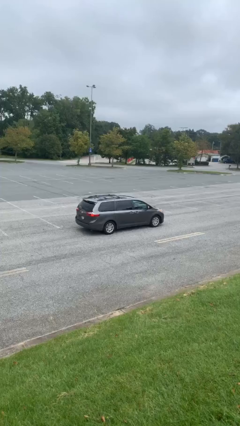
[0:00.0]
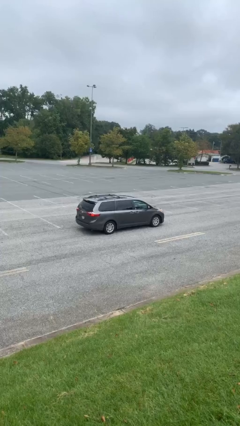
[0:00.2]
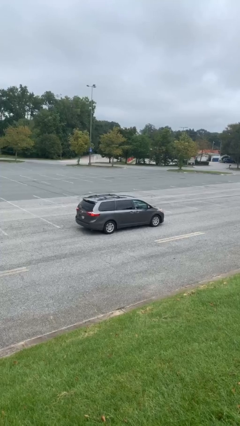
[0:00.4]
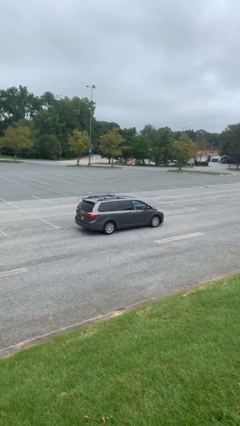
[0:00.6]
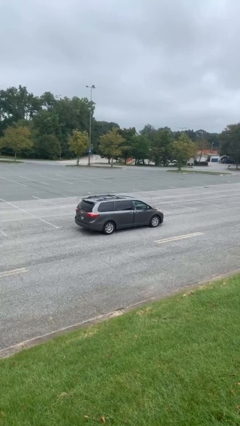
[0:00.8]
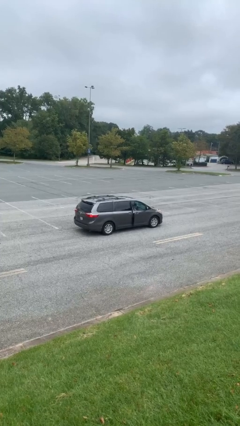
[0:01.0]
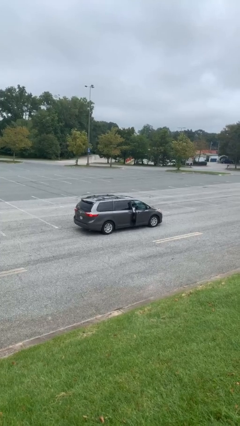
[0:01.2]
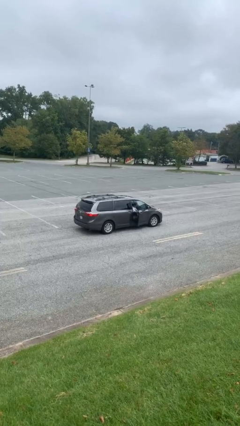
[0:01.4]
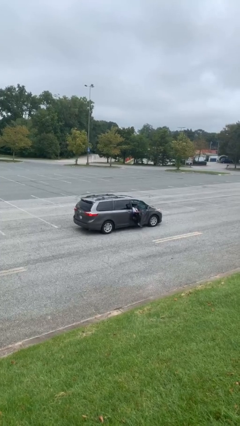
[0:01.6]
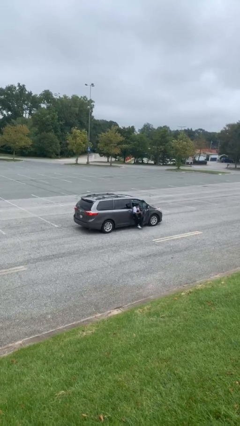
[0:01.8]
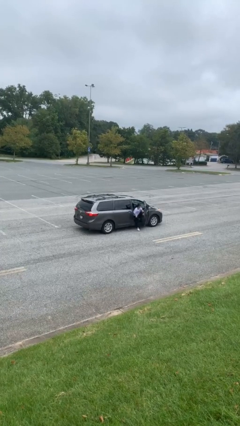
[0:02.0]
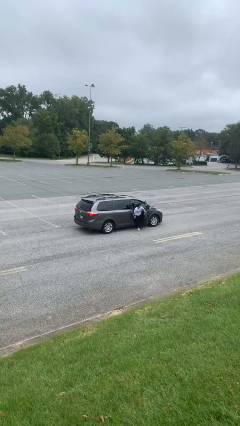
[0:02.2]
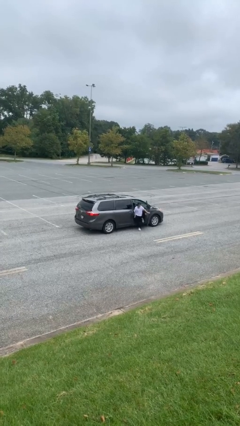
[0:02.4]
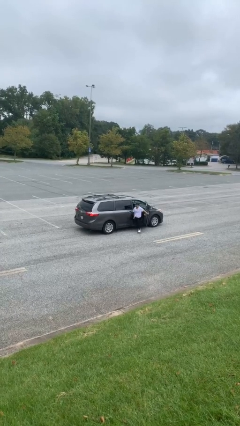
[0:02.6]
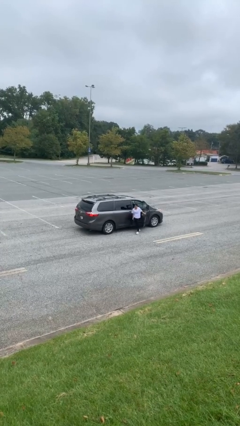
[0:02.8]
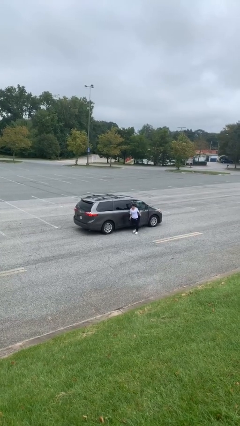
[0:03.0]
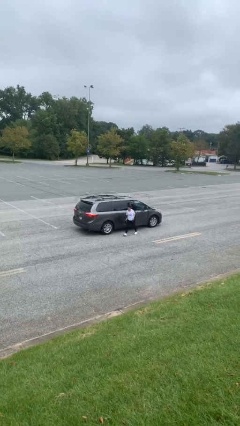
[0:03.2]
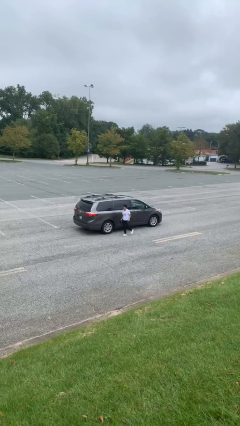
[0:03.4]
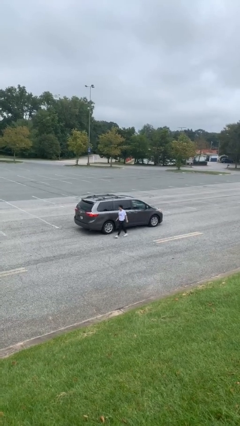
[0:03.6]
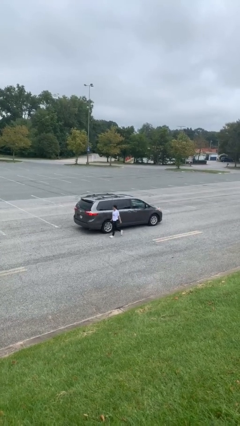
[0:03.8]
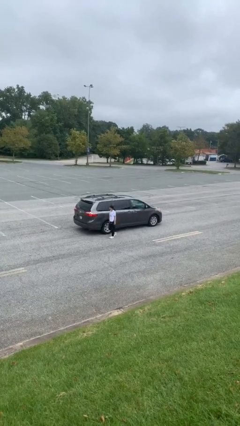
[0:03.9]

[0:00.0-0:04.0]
car drops off person

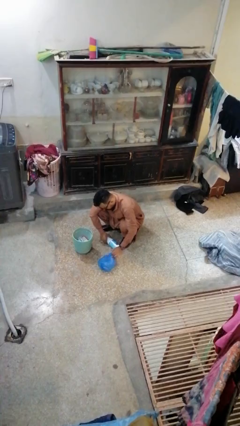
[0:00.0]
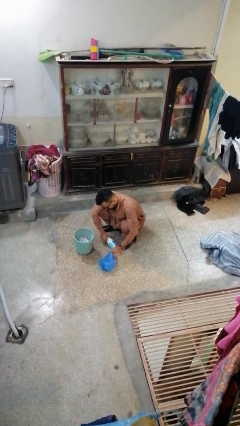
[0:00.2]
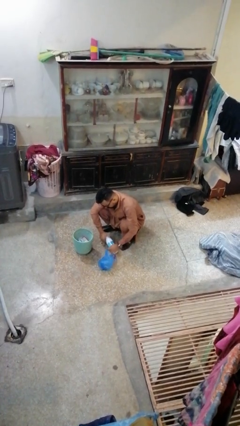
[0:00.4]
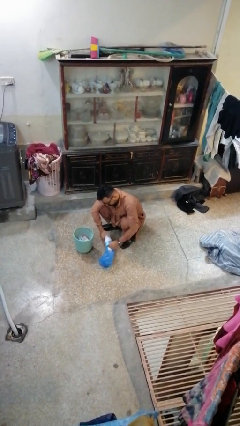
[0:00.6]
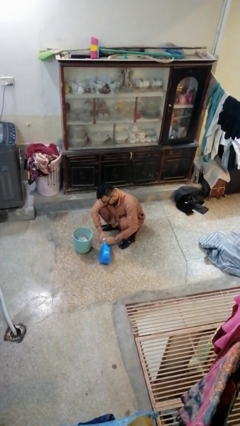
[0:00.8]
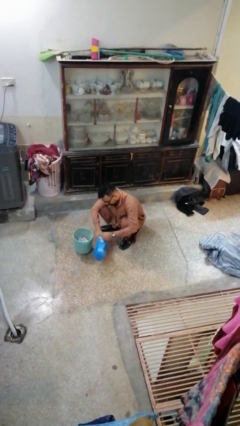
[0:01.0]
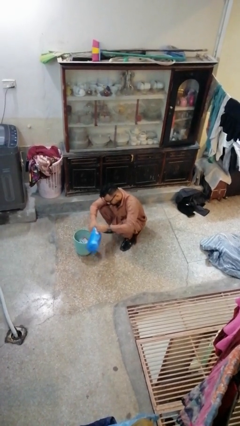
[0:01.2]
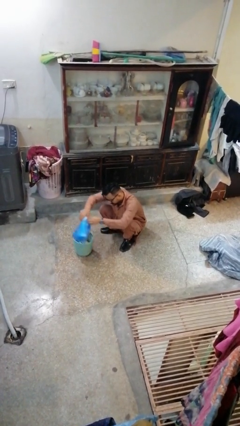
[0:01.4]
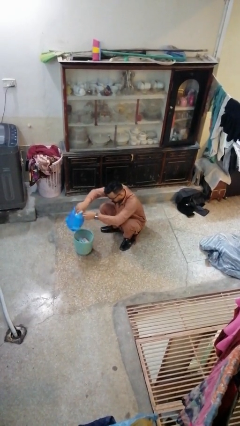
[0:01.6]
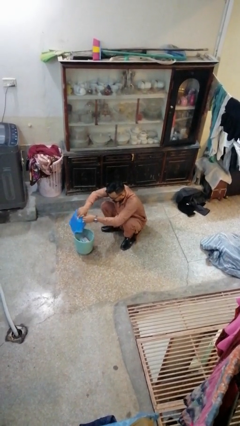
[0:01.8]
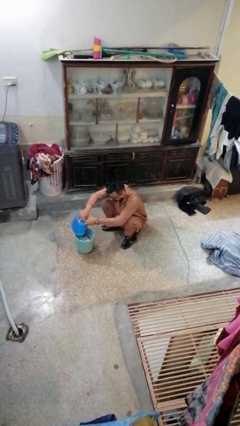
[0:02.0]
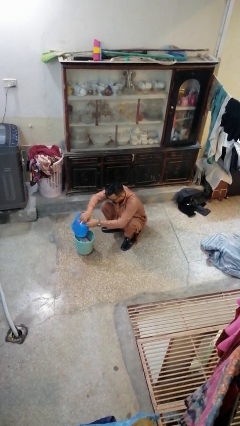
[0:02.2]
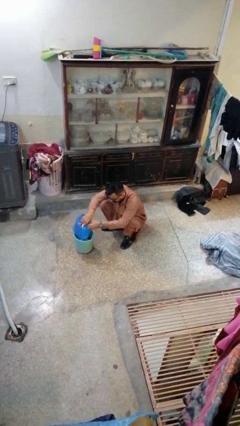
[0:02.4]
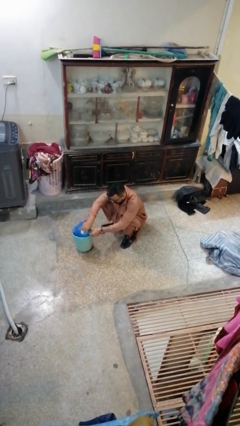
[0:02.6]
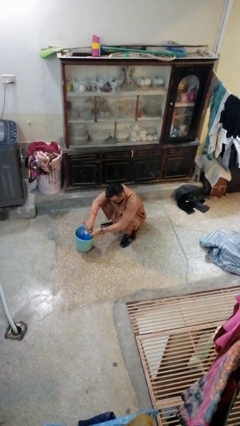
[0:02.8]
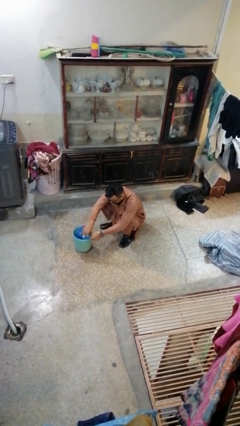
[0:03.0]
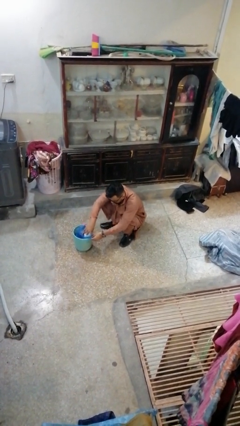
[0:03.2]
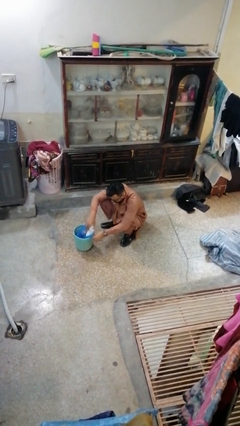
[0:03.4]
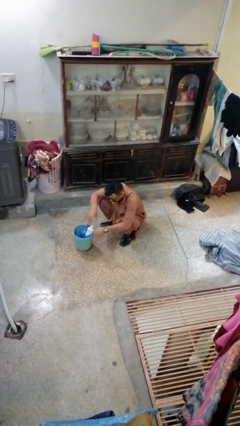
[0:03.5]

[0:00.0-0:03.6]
person inserts trashbag into trashcan

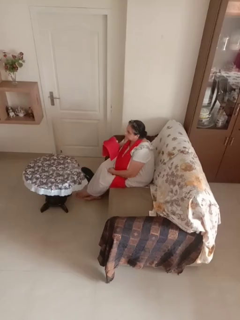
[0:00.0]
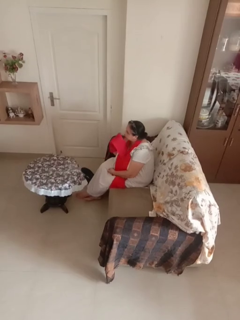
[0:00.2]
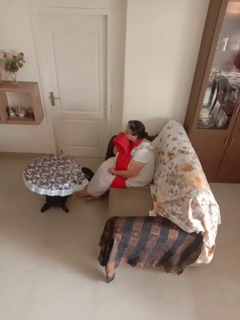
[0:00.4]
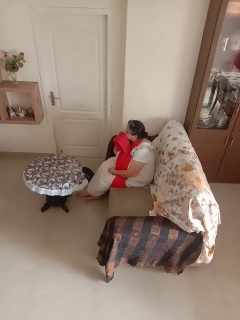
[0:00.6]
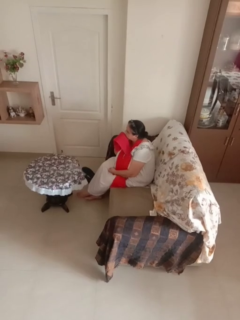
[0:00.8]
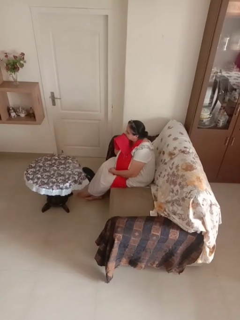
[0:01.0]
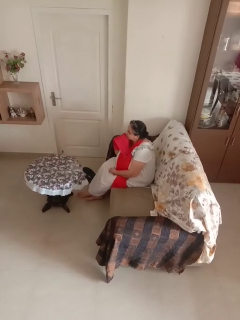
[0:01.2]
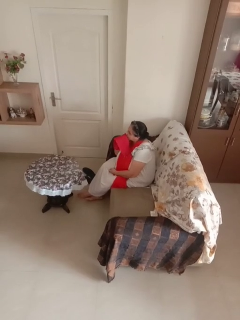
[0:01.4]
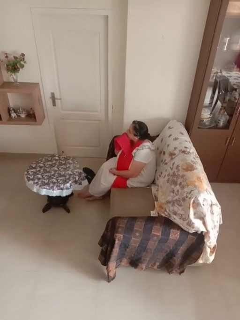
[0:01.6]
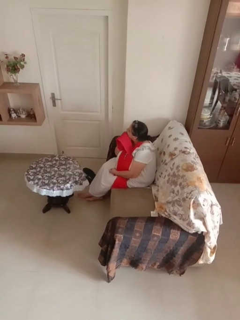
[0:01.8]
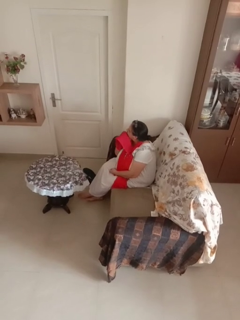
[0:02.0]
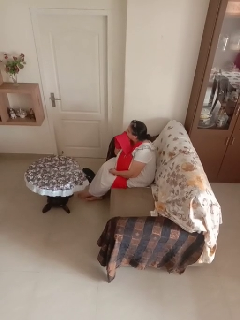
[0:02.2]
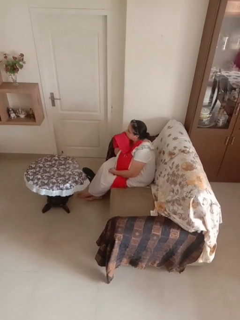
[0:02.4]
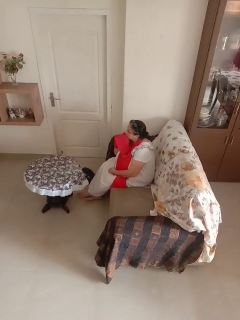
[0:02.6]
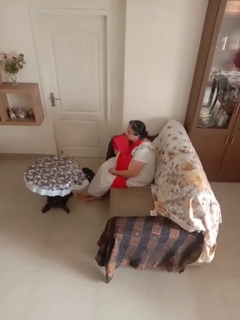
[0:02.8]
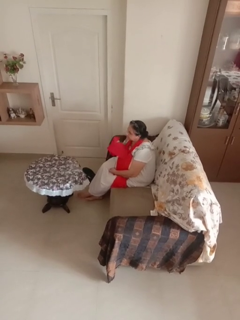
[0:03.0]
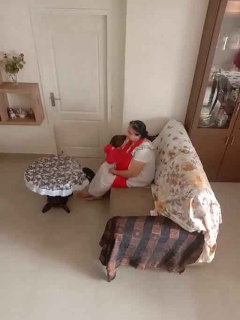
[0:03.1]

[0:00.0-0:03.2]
person wipes mouth with napkin

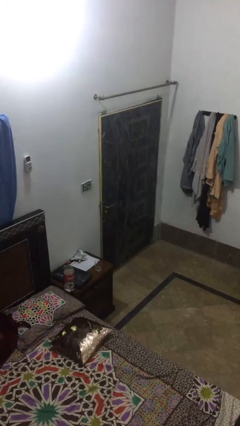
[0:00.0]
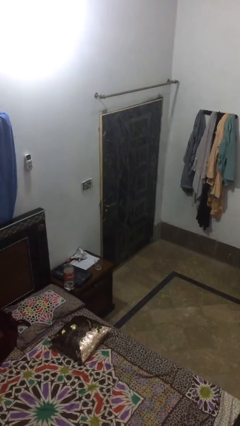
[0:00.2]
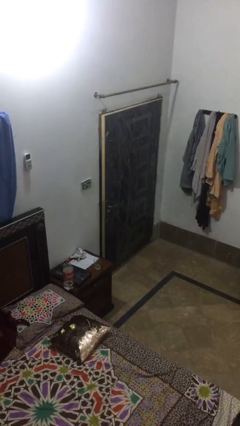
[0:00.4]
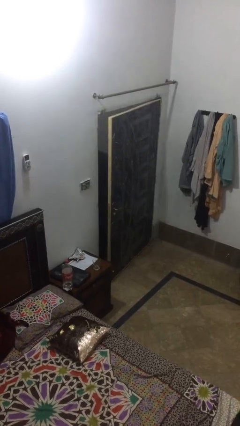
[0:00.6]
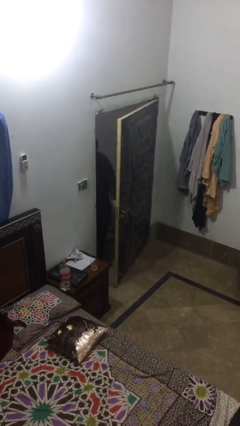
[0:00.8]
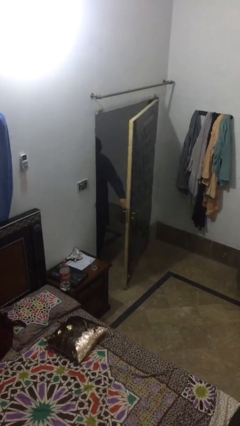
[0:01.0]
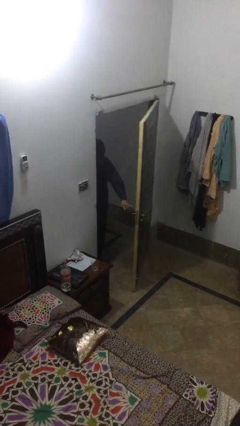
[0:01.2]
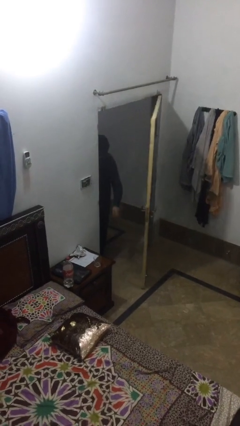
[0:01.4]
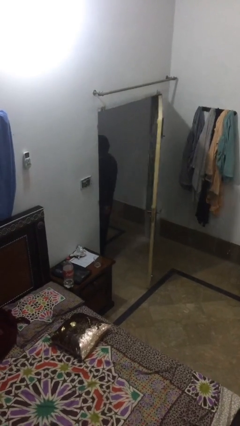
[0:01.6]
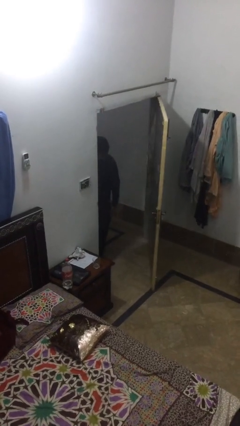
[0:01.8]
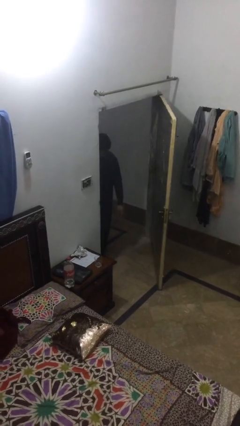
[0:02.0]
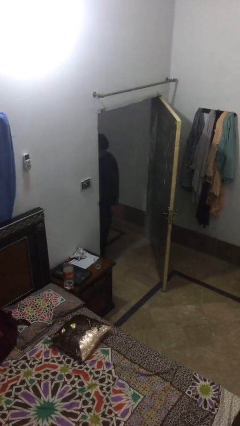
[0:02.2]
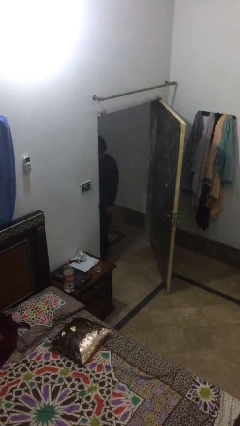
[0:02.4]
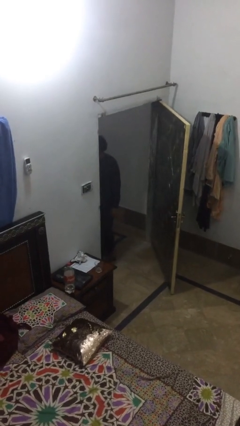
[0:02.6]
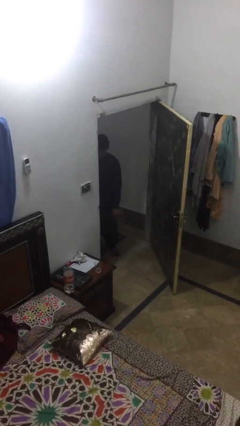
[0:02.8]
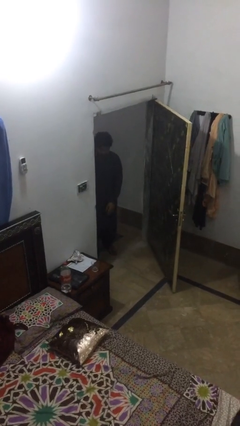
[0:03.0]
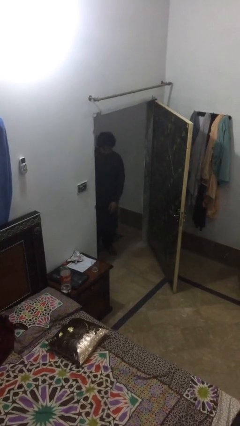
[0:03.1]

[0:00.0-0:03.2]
person opens facility door

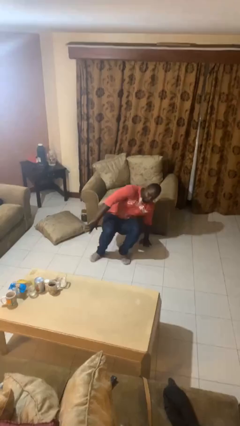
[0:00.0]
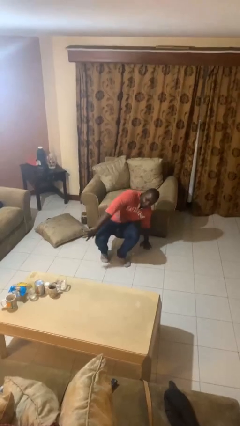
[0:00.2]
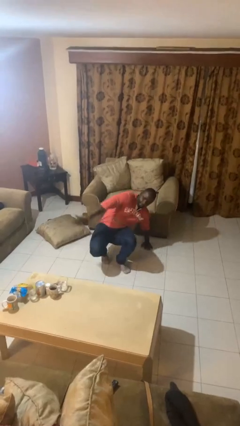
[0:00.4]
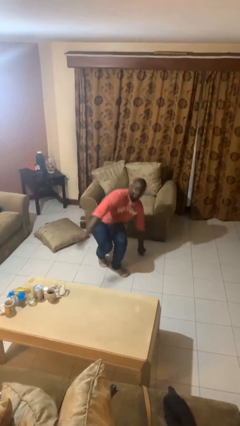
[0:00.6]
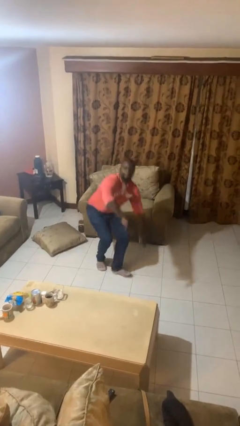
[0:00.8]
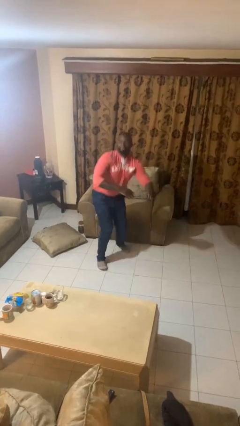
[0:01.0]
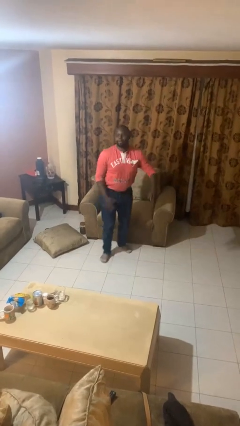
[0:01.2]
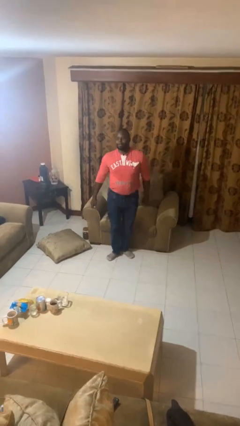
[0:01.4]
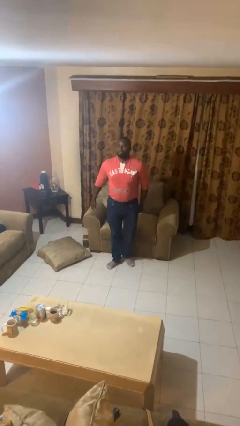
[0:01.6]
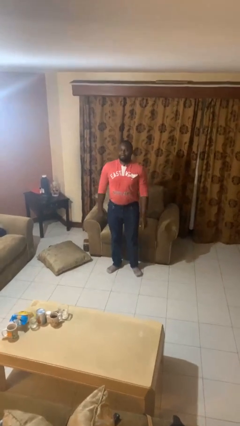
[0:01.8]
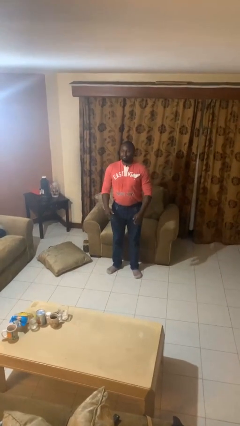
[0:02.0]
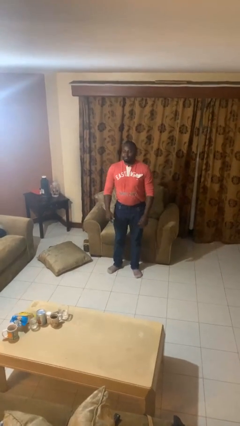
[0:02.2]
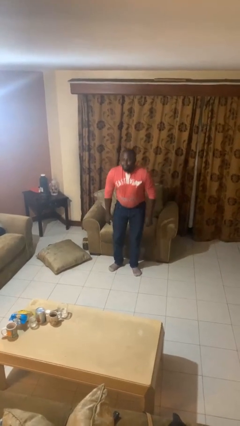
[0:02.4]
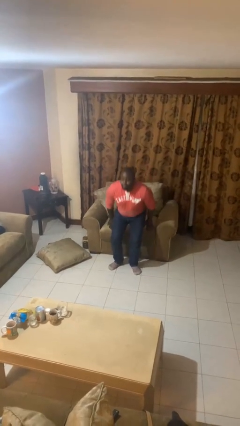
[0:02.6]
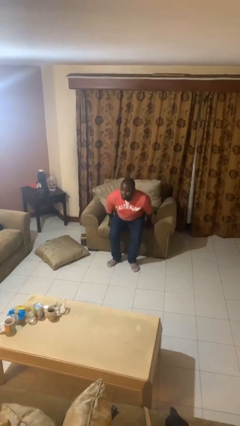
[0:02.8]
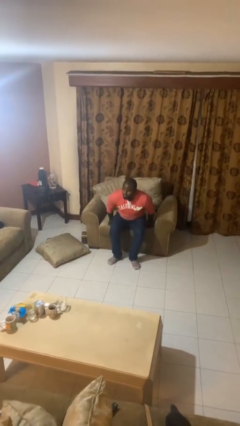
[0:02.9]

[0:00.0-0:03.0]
person stands up from floor

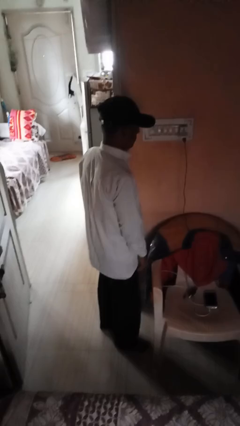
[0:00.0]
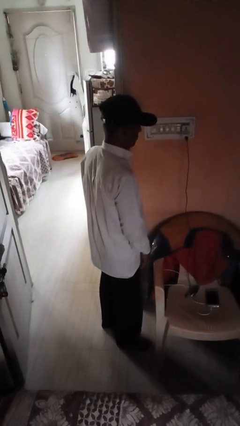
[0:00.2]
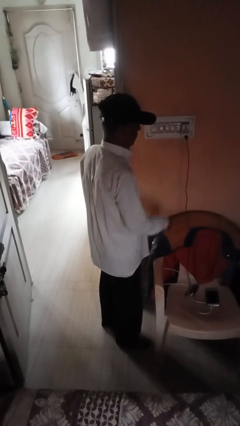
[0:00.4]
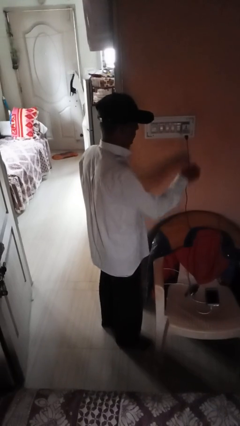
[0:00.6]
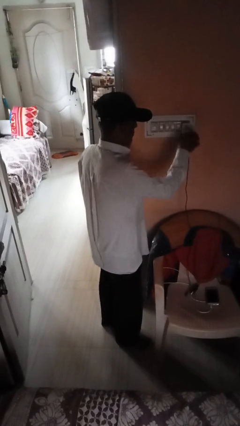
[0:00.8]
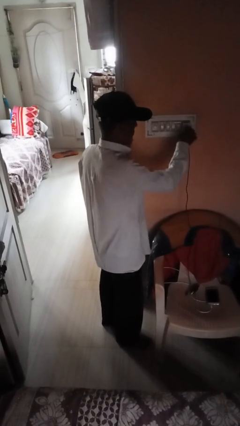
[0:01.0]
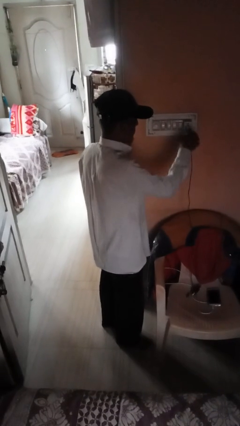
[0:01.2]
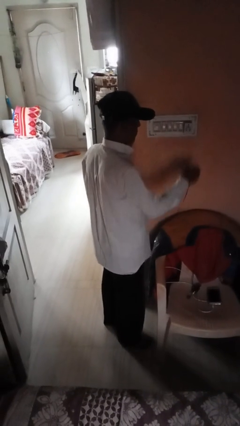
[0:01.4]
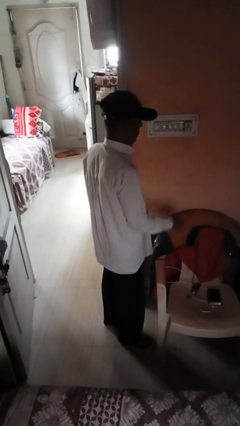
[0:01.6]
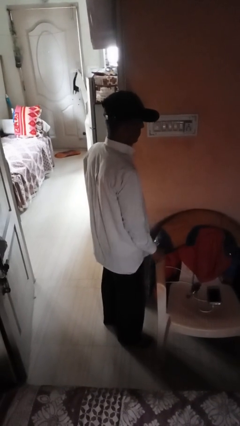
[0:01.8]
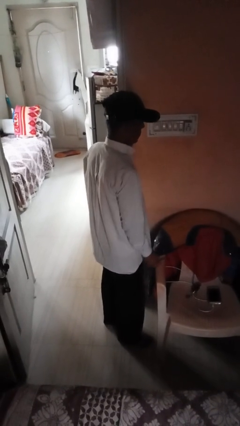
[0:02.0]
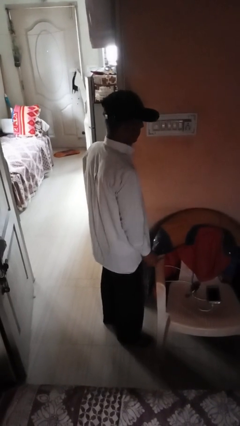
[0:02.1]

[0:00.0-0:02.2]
person unplugs from electrical socket
